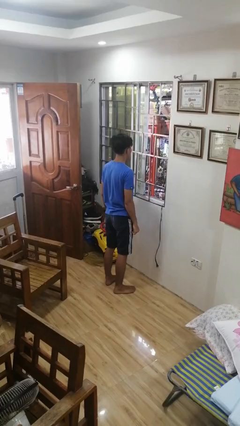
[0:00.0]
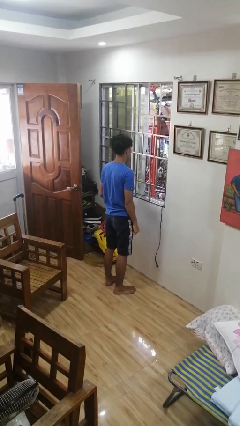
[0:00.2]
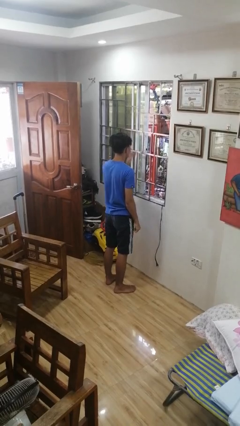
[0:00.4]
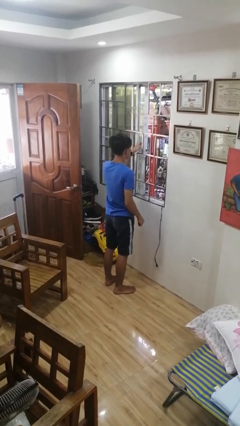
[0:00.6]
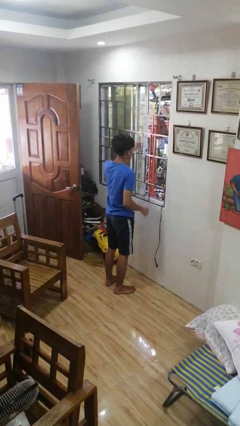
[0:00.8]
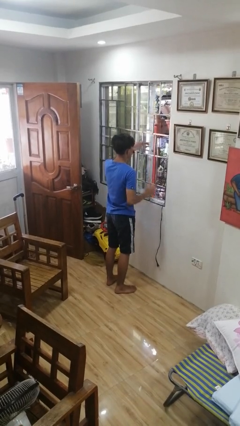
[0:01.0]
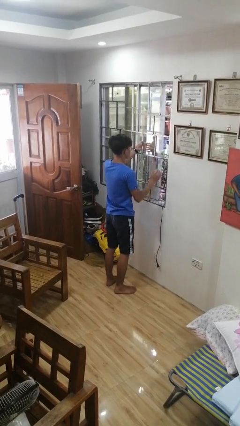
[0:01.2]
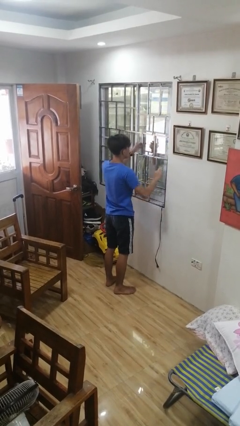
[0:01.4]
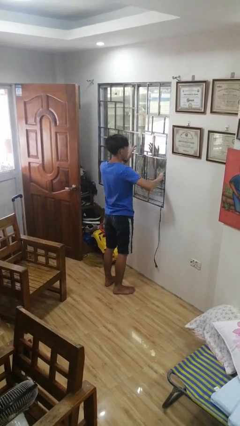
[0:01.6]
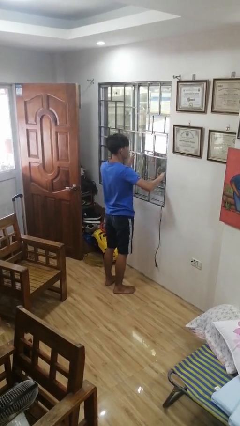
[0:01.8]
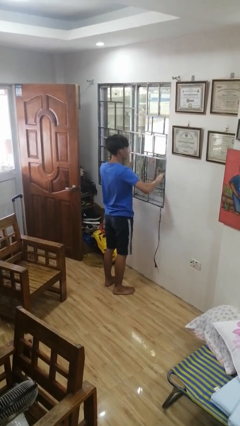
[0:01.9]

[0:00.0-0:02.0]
person closes home window

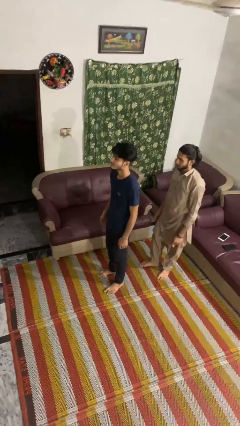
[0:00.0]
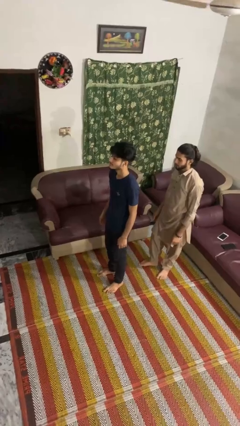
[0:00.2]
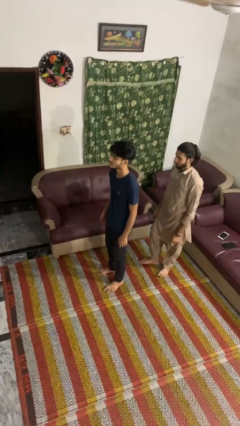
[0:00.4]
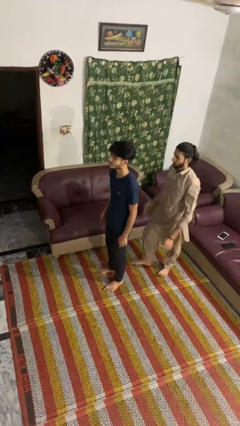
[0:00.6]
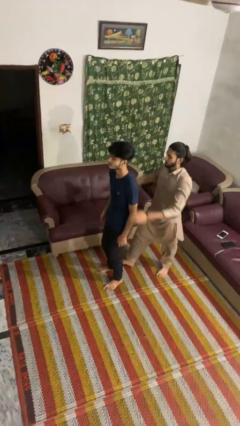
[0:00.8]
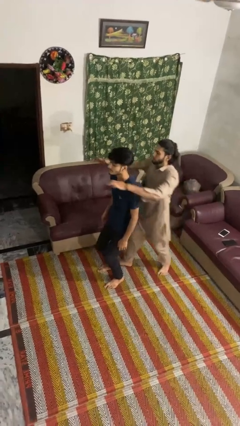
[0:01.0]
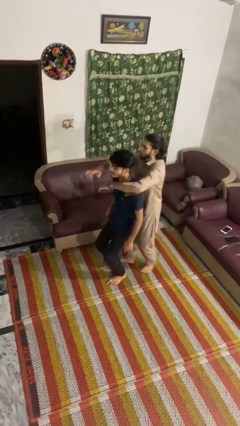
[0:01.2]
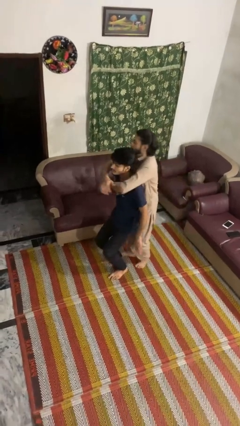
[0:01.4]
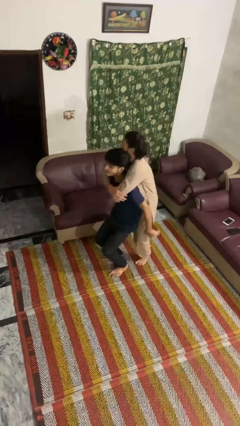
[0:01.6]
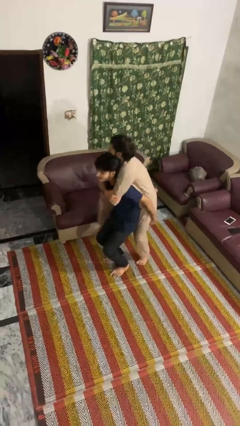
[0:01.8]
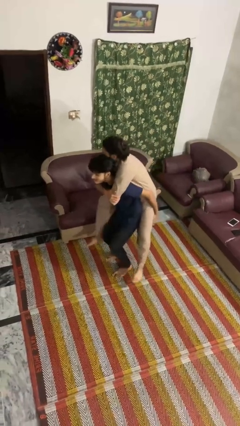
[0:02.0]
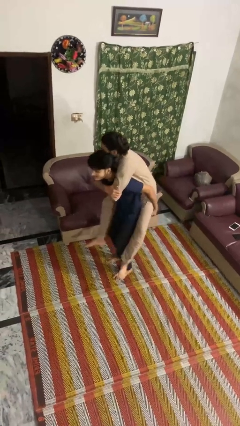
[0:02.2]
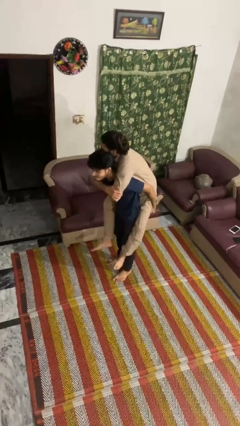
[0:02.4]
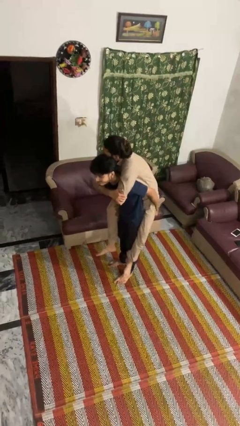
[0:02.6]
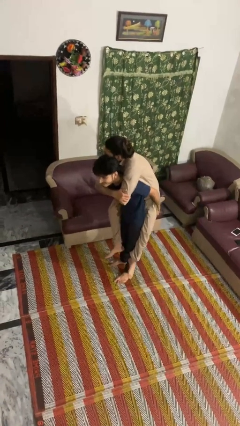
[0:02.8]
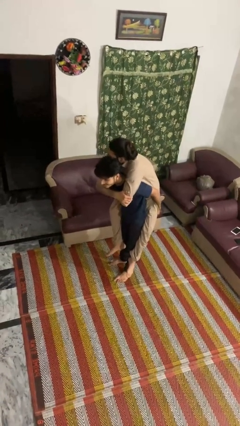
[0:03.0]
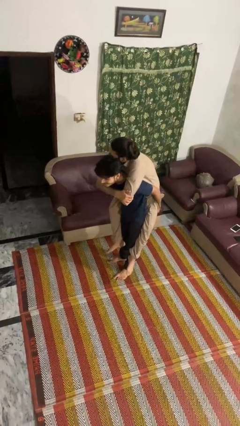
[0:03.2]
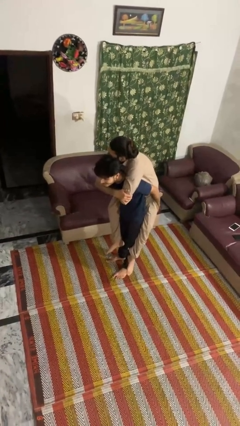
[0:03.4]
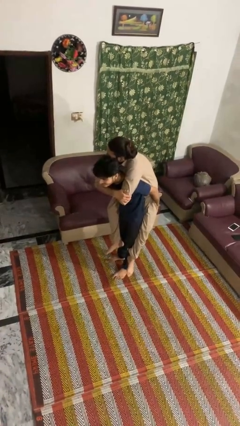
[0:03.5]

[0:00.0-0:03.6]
person carries person over shoulder

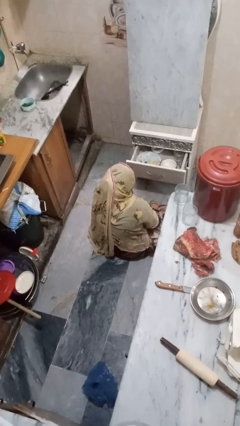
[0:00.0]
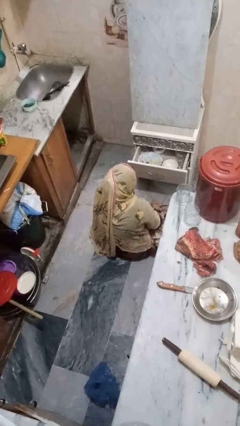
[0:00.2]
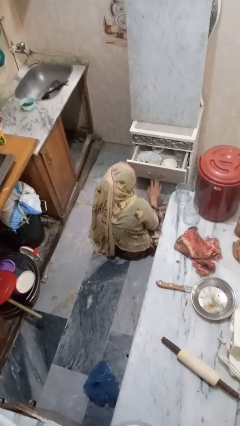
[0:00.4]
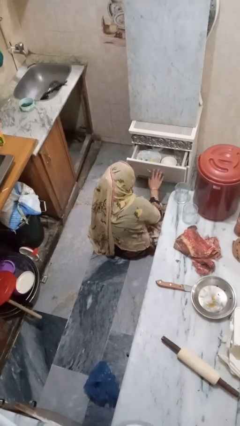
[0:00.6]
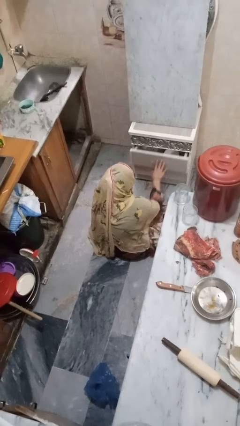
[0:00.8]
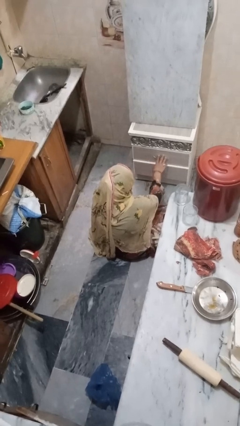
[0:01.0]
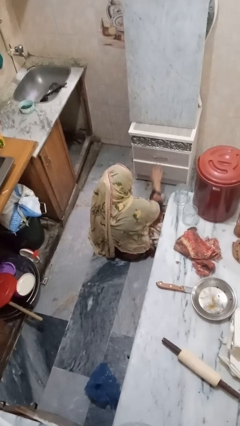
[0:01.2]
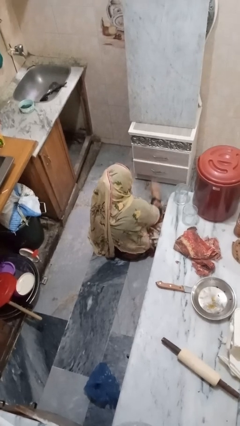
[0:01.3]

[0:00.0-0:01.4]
person closes kitchen drawer

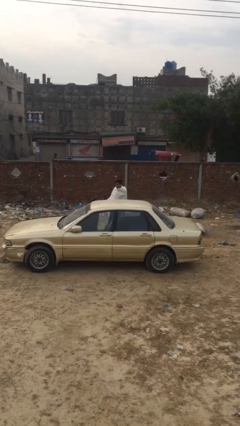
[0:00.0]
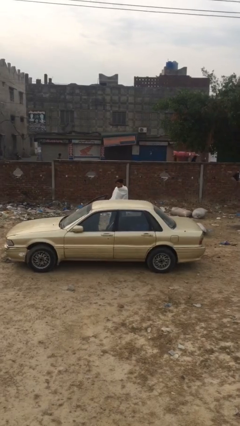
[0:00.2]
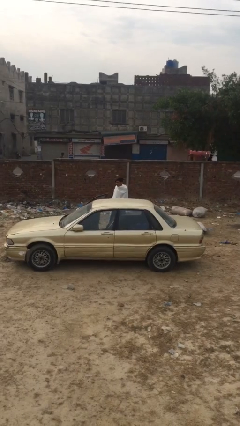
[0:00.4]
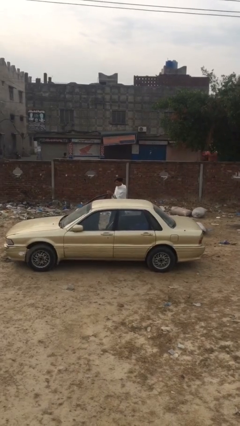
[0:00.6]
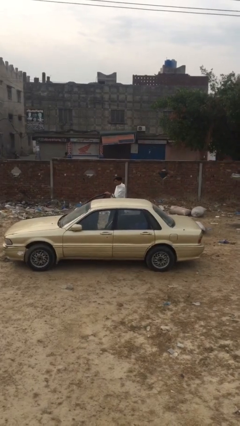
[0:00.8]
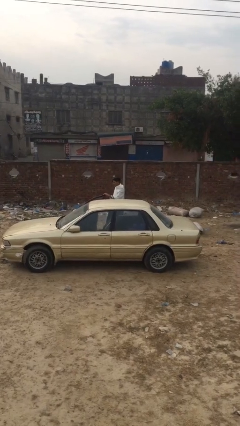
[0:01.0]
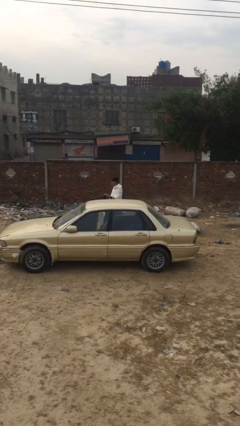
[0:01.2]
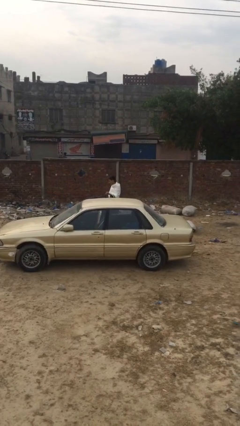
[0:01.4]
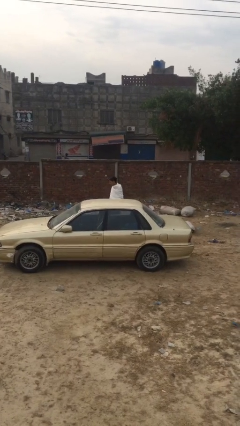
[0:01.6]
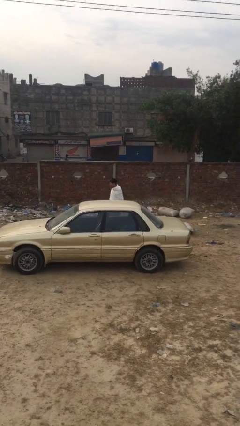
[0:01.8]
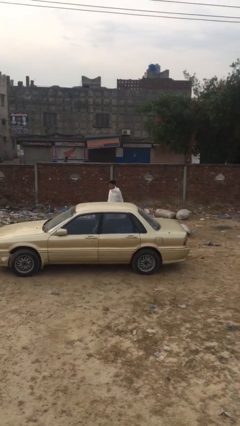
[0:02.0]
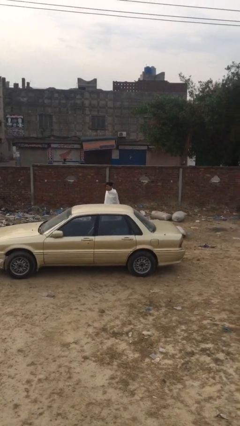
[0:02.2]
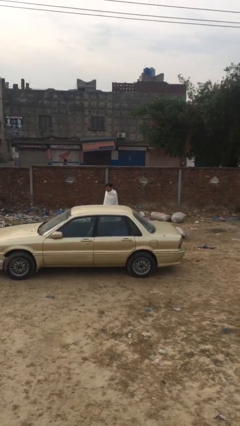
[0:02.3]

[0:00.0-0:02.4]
person closes car door

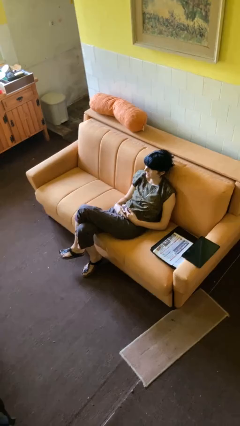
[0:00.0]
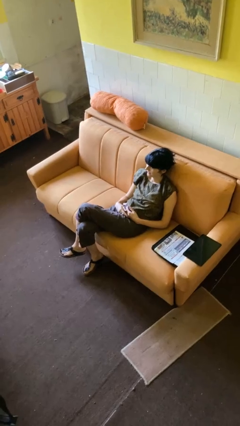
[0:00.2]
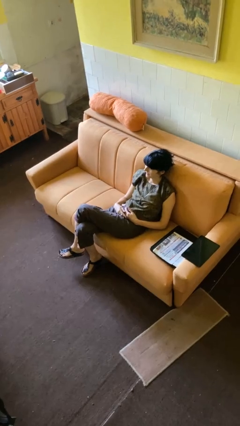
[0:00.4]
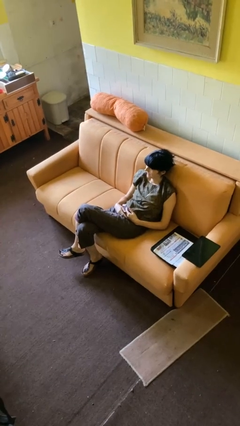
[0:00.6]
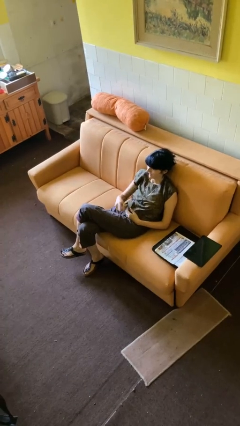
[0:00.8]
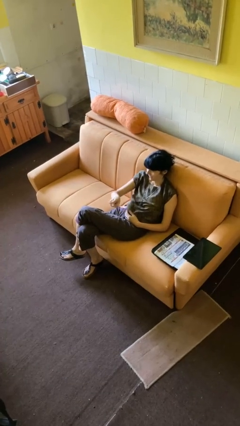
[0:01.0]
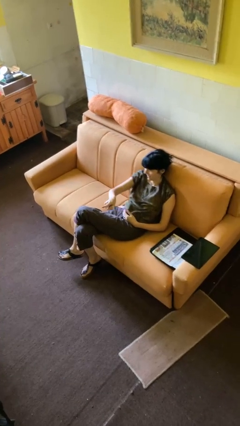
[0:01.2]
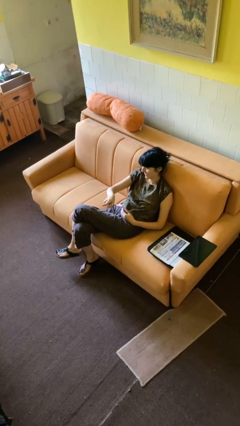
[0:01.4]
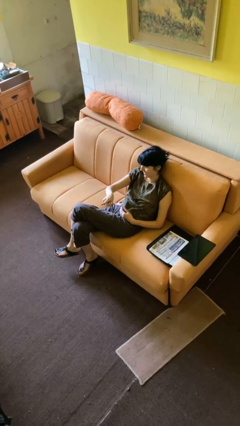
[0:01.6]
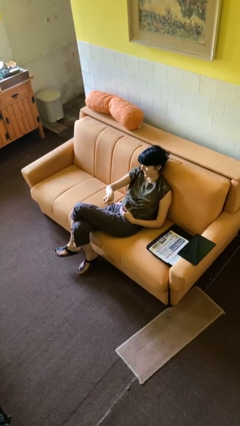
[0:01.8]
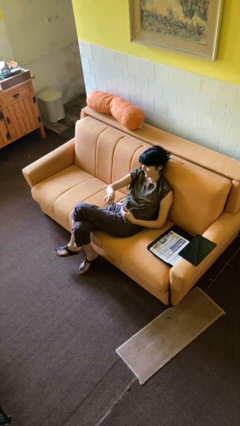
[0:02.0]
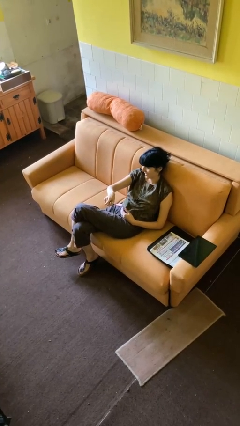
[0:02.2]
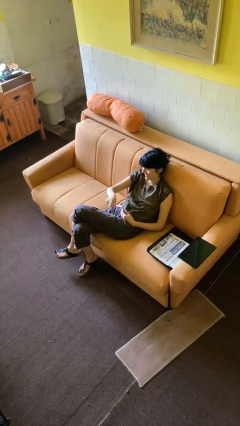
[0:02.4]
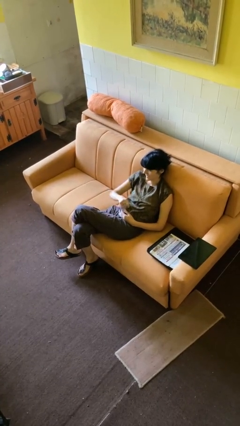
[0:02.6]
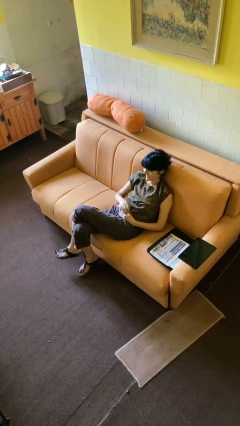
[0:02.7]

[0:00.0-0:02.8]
person points at person

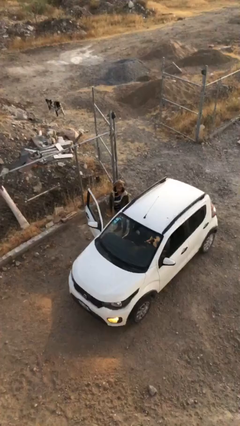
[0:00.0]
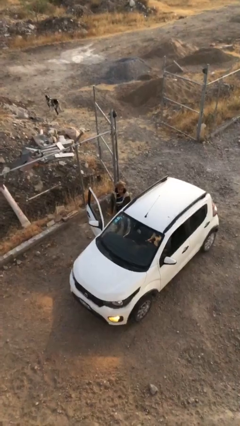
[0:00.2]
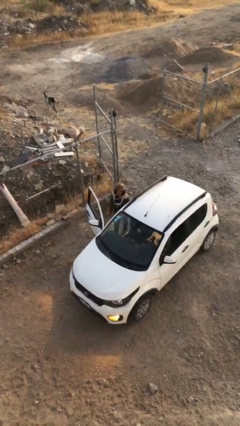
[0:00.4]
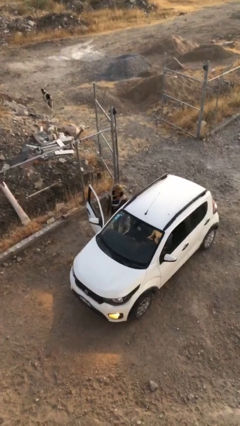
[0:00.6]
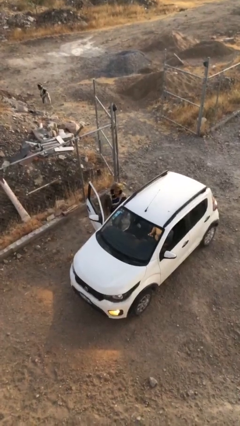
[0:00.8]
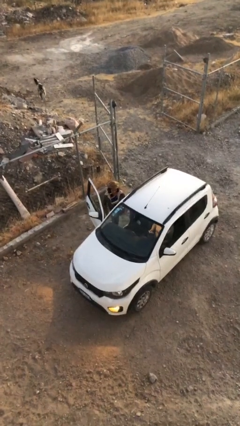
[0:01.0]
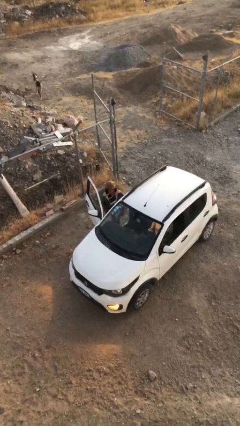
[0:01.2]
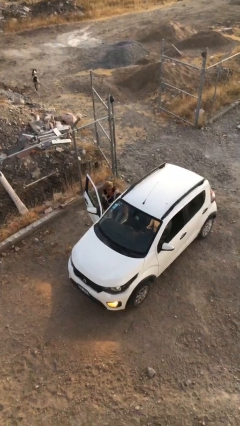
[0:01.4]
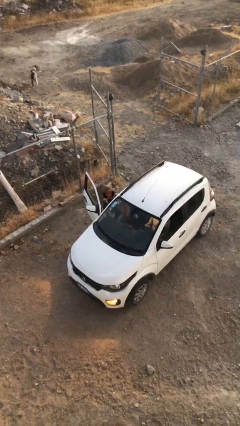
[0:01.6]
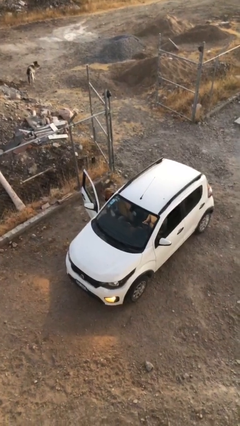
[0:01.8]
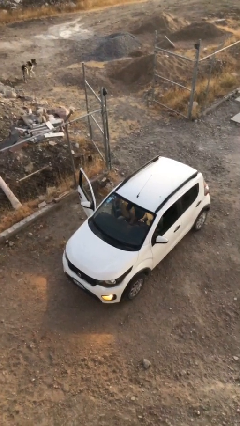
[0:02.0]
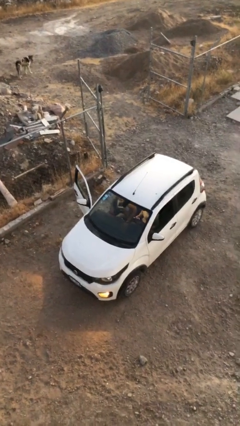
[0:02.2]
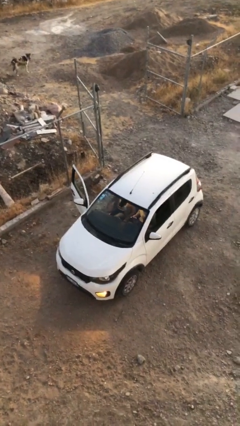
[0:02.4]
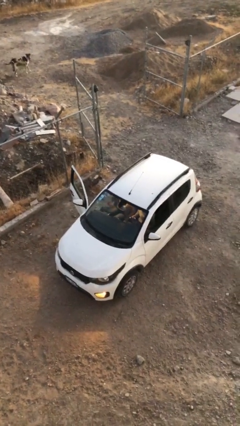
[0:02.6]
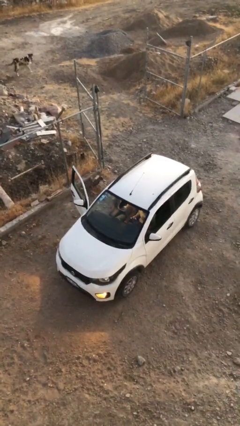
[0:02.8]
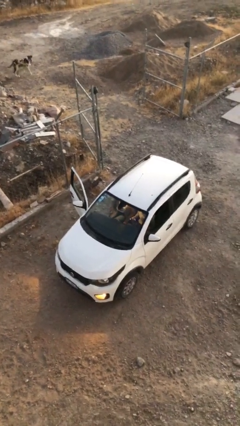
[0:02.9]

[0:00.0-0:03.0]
person enters car

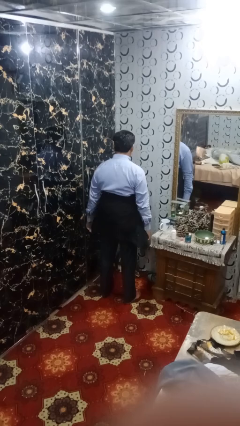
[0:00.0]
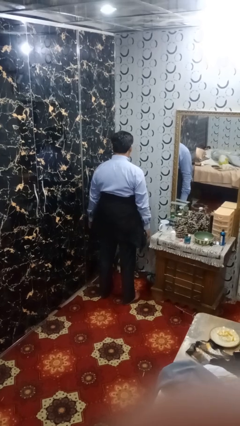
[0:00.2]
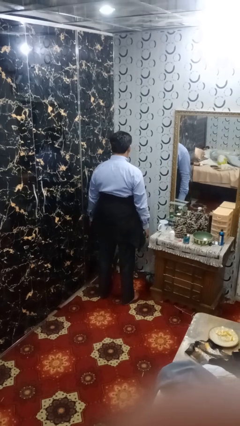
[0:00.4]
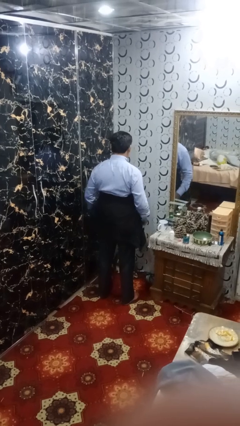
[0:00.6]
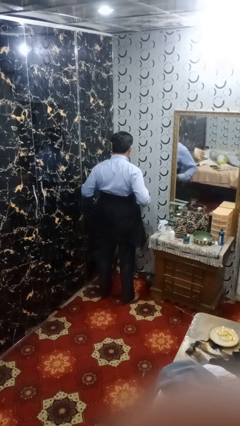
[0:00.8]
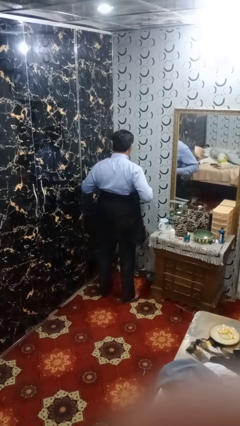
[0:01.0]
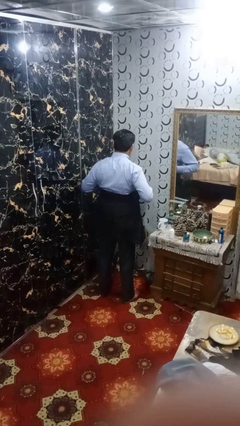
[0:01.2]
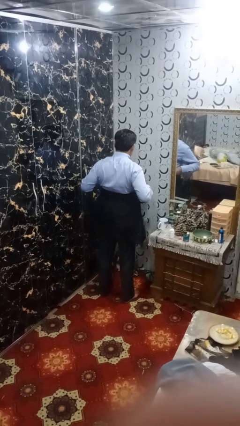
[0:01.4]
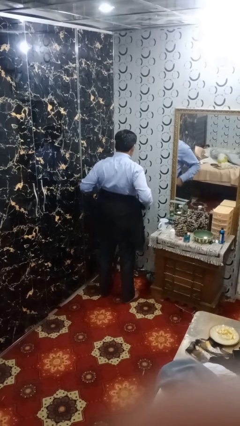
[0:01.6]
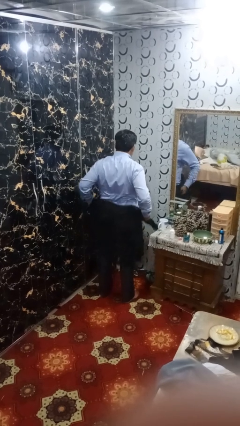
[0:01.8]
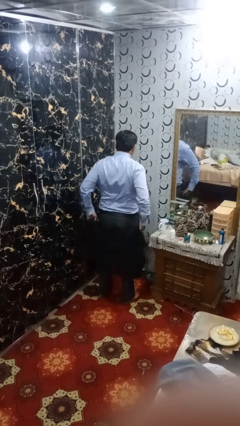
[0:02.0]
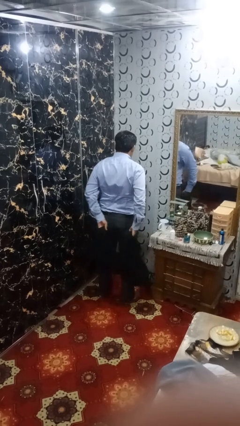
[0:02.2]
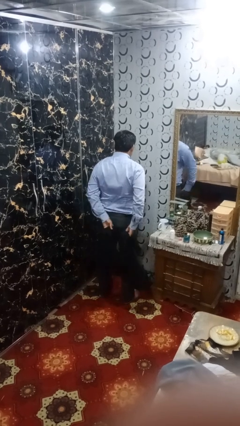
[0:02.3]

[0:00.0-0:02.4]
person unties jacket around waist
